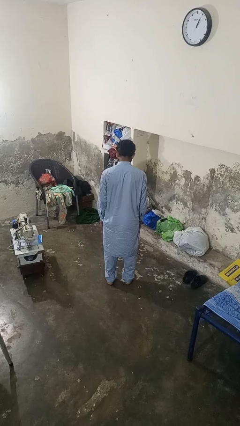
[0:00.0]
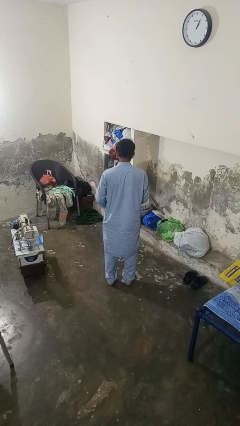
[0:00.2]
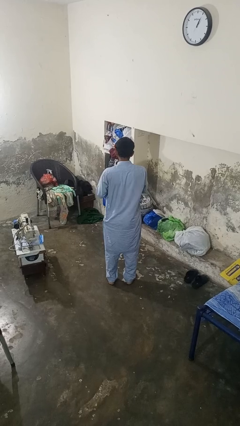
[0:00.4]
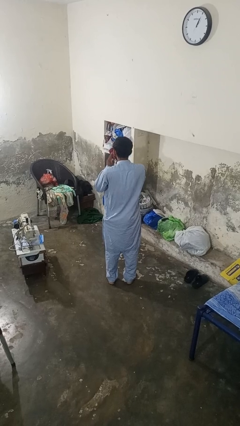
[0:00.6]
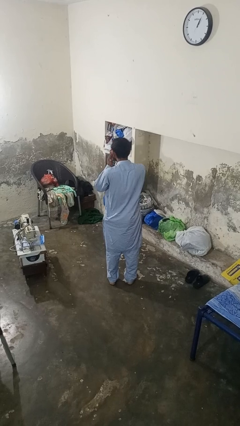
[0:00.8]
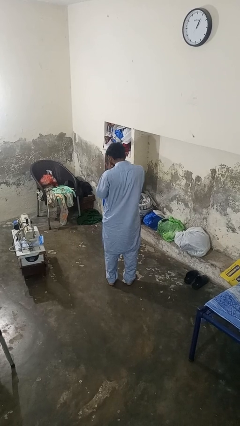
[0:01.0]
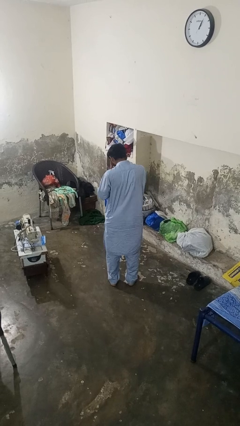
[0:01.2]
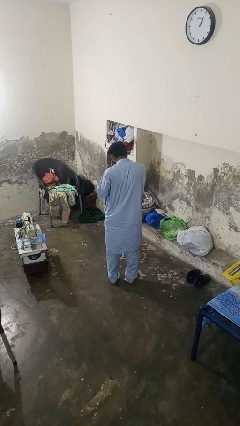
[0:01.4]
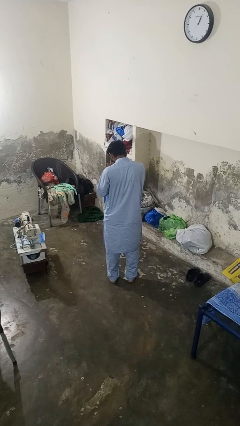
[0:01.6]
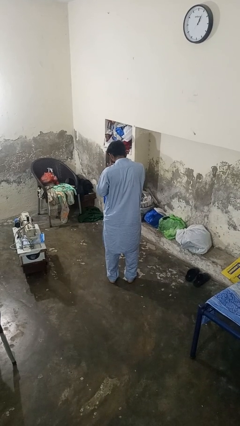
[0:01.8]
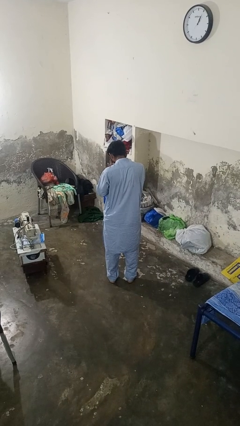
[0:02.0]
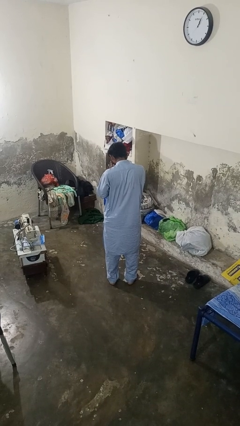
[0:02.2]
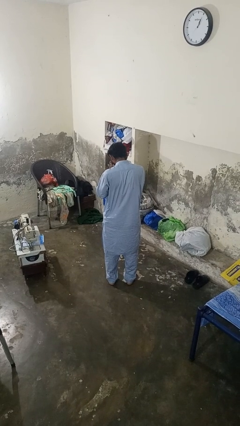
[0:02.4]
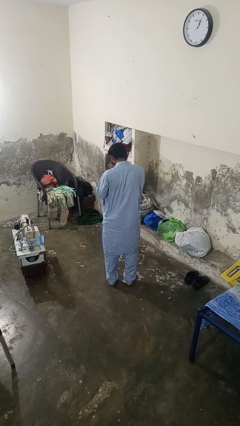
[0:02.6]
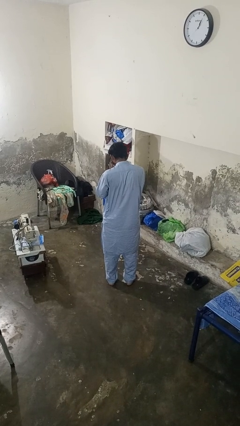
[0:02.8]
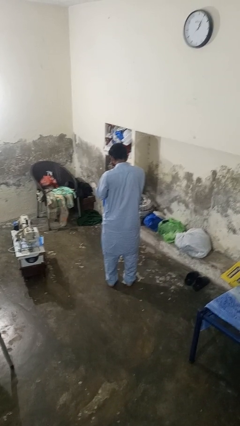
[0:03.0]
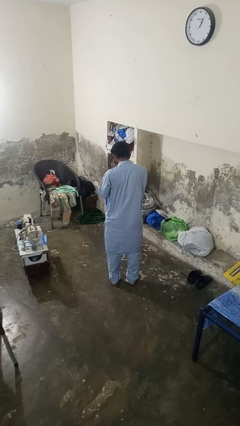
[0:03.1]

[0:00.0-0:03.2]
person sneezes into hand

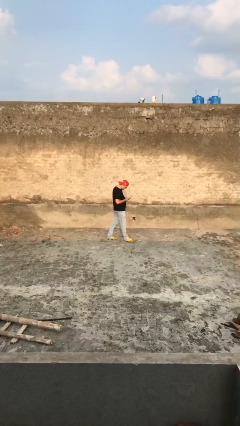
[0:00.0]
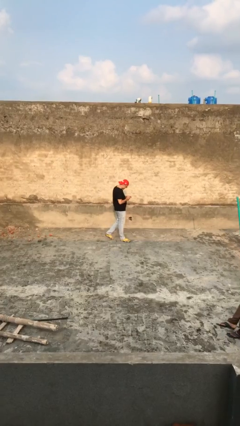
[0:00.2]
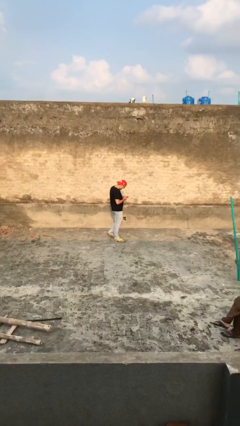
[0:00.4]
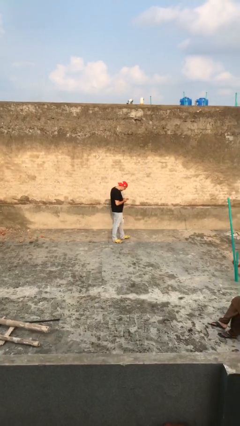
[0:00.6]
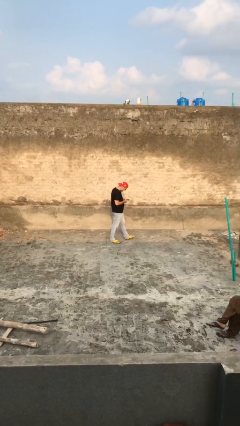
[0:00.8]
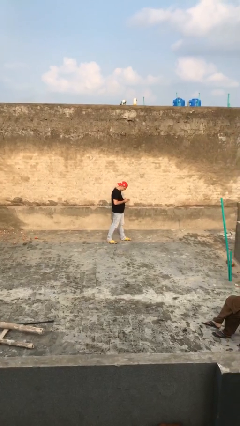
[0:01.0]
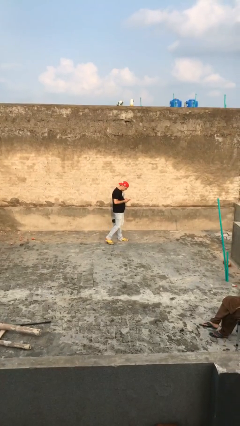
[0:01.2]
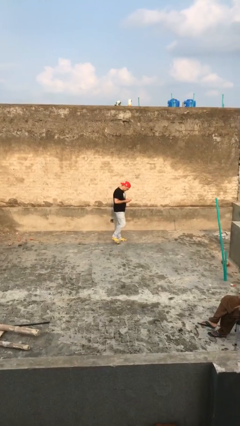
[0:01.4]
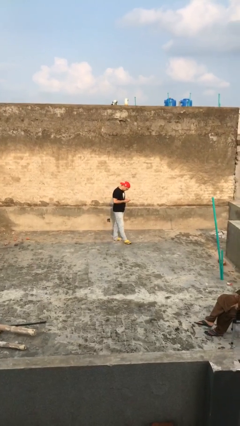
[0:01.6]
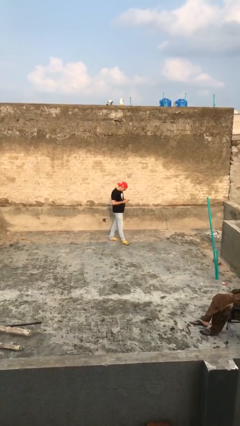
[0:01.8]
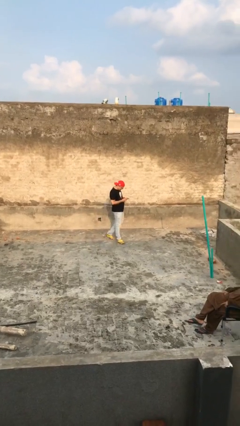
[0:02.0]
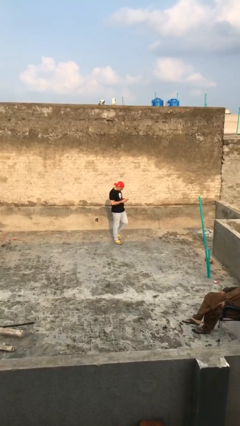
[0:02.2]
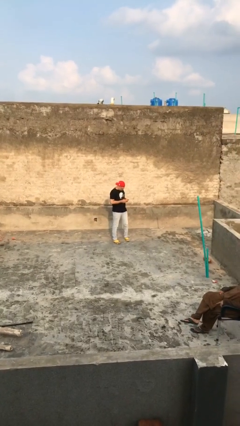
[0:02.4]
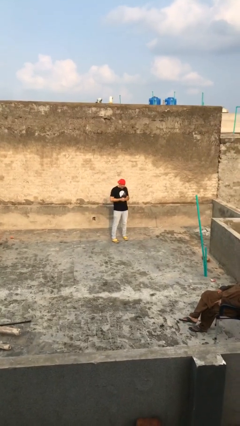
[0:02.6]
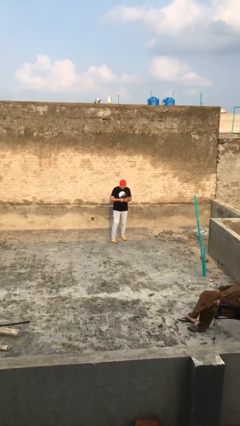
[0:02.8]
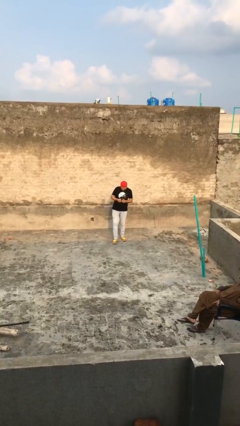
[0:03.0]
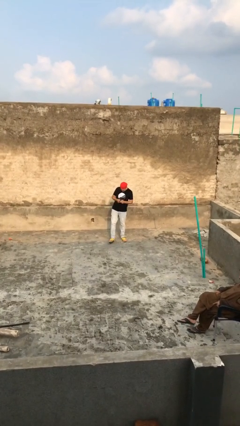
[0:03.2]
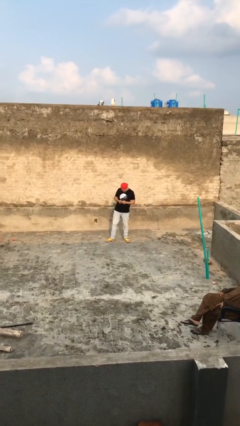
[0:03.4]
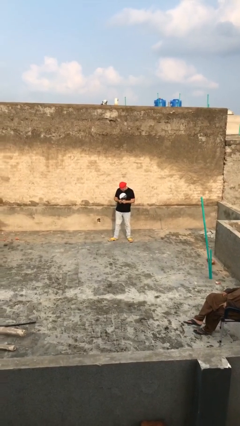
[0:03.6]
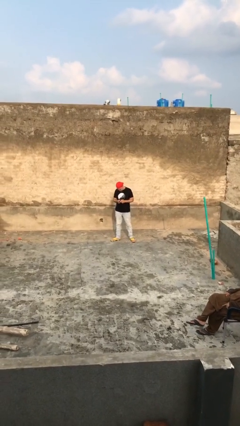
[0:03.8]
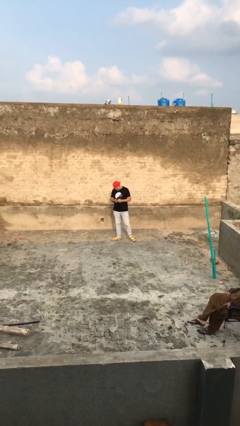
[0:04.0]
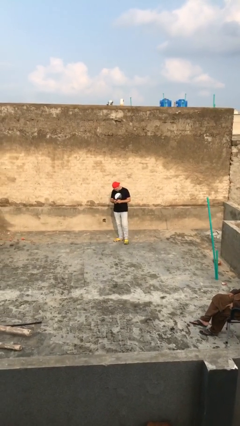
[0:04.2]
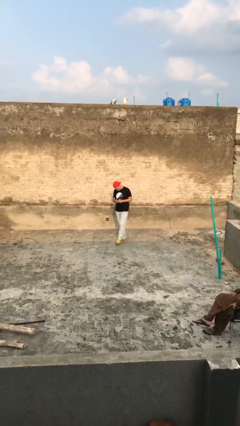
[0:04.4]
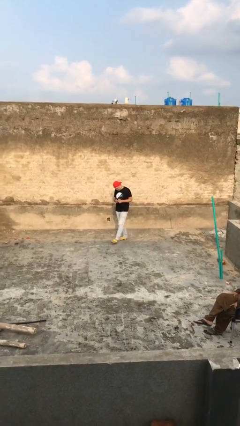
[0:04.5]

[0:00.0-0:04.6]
person texts on phone

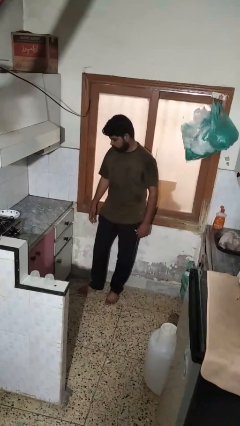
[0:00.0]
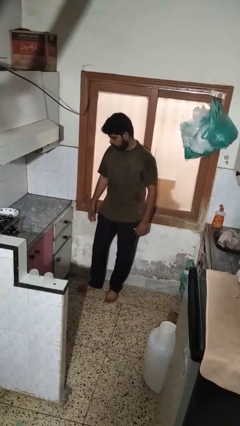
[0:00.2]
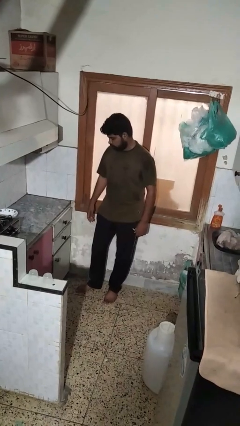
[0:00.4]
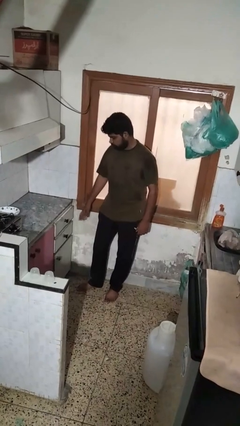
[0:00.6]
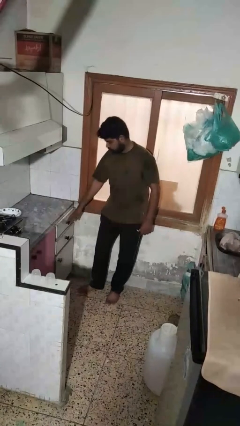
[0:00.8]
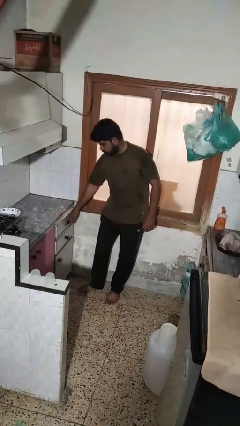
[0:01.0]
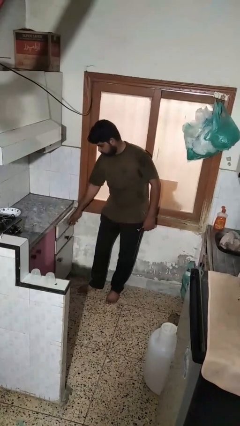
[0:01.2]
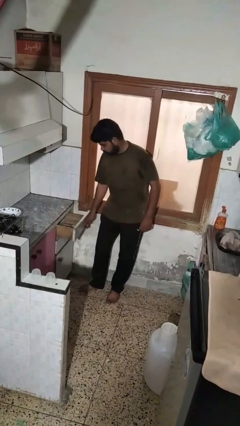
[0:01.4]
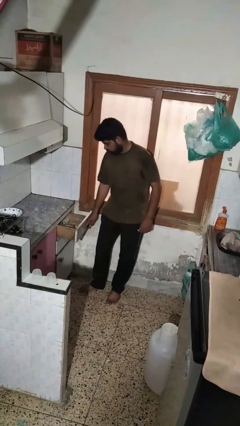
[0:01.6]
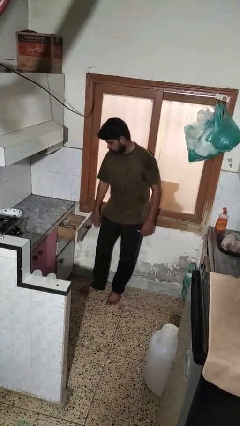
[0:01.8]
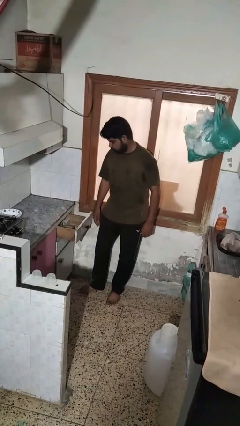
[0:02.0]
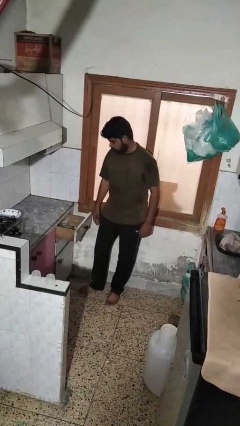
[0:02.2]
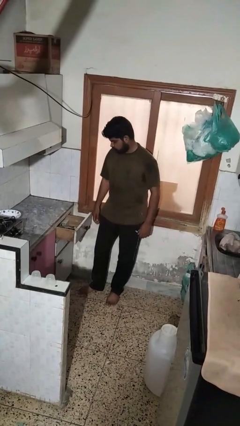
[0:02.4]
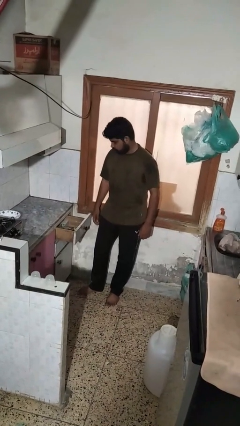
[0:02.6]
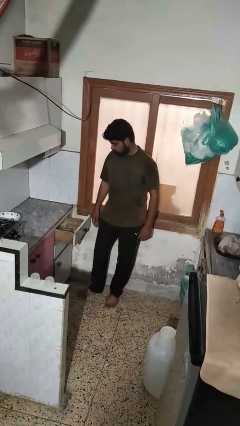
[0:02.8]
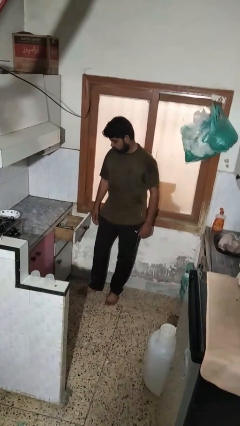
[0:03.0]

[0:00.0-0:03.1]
person opens kitchen drawer

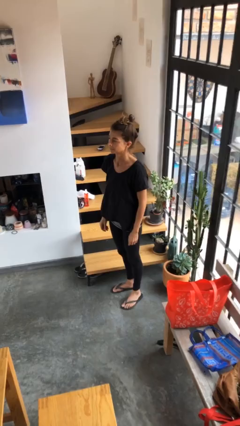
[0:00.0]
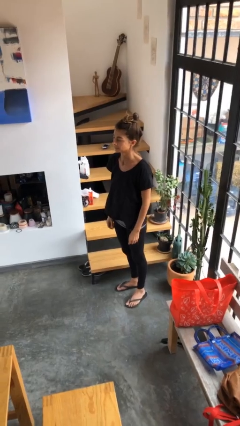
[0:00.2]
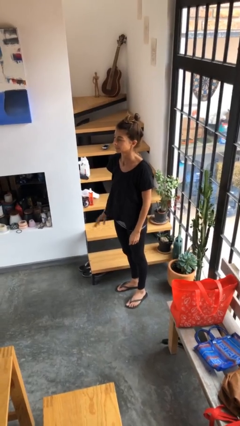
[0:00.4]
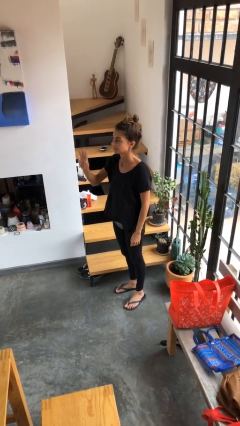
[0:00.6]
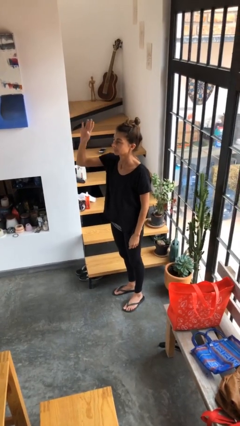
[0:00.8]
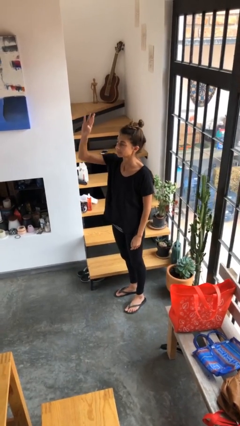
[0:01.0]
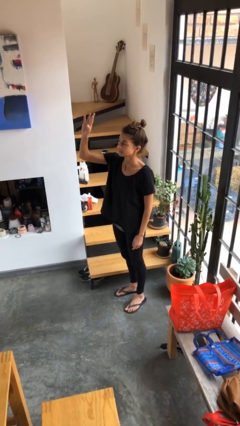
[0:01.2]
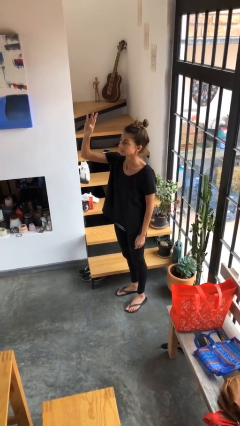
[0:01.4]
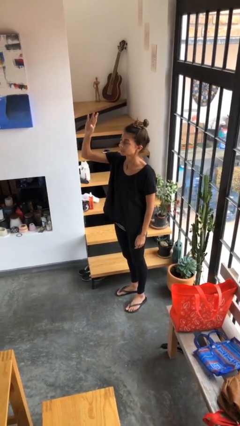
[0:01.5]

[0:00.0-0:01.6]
person gestures raise hand

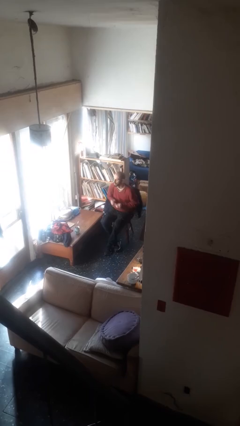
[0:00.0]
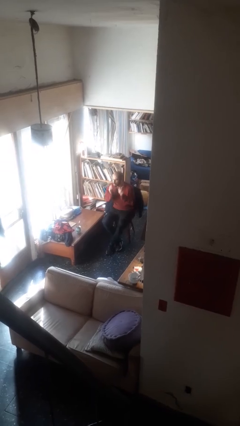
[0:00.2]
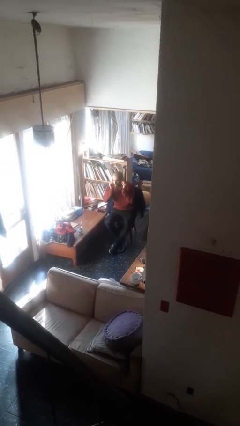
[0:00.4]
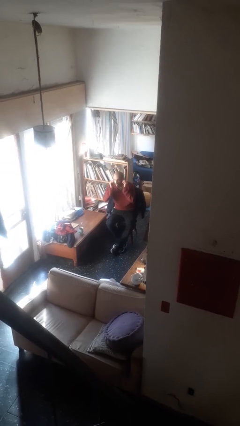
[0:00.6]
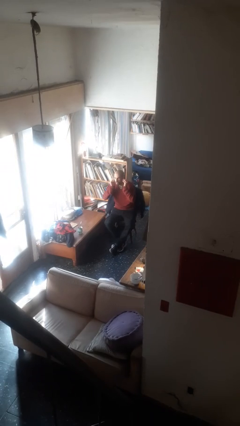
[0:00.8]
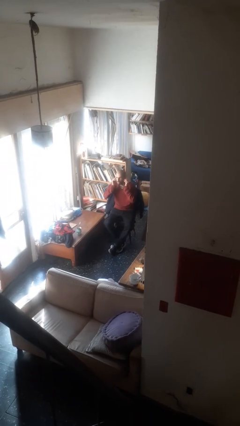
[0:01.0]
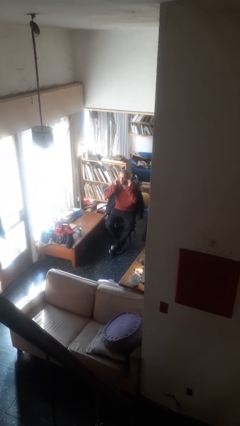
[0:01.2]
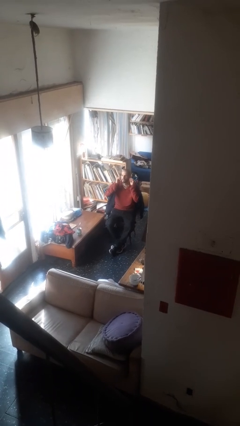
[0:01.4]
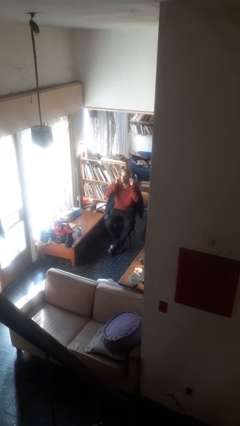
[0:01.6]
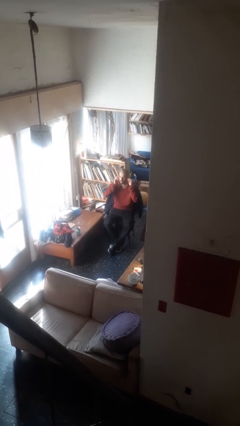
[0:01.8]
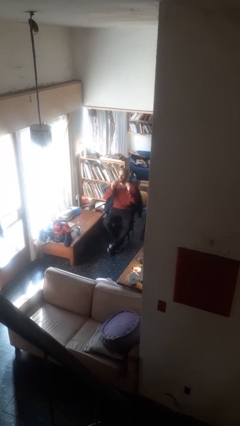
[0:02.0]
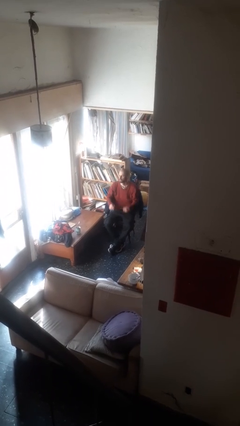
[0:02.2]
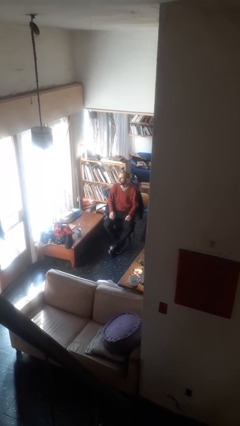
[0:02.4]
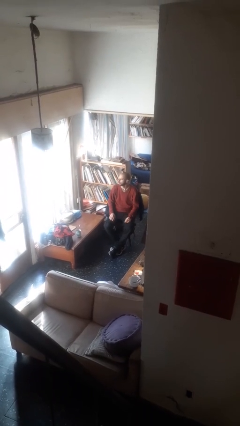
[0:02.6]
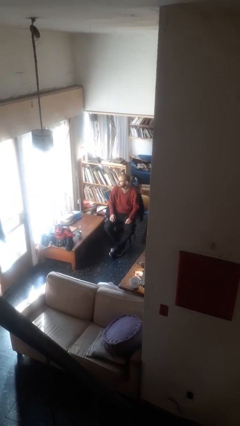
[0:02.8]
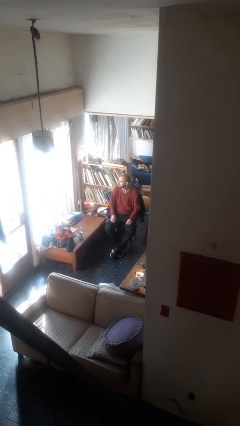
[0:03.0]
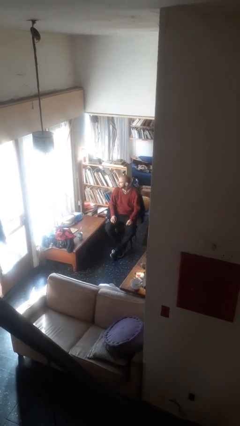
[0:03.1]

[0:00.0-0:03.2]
person puts on headphones

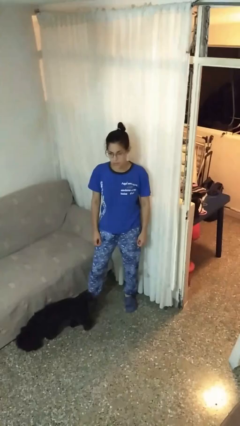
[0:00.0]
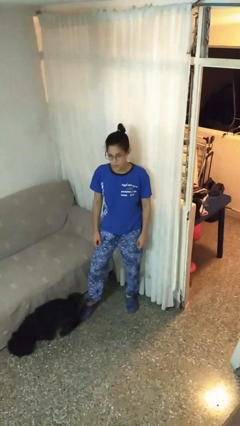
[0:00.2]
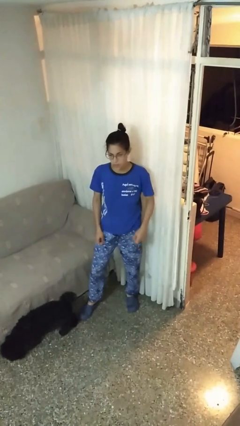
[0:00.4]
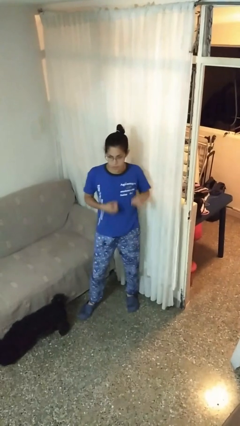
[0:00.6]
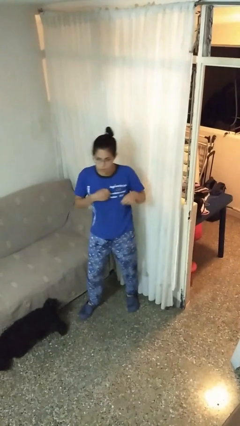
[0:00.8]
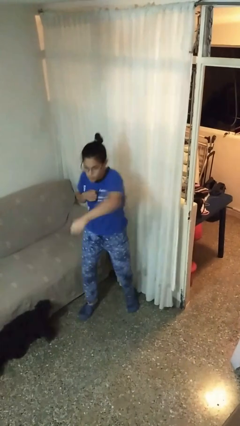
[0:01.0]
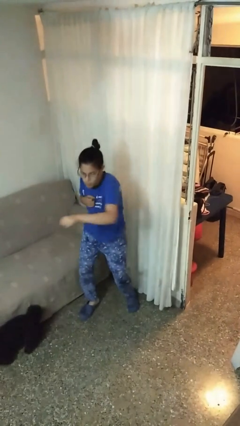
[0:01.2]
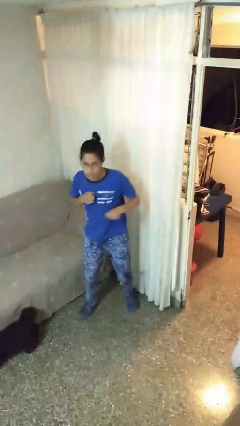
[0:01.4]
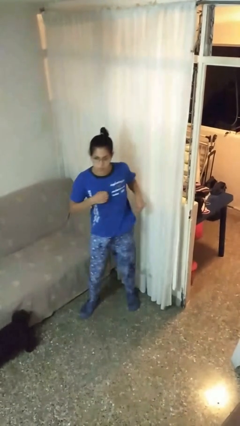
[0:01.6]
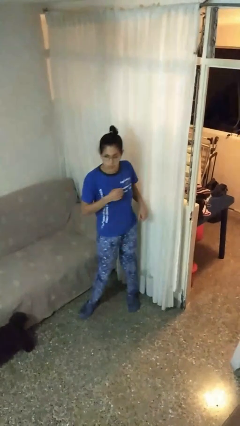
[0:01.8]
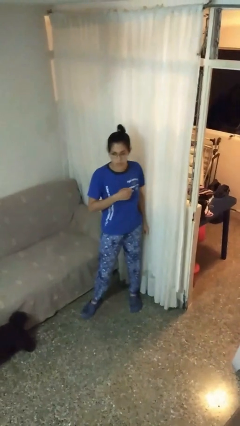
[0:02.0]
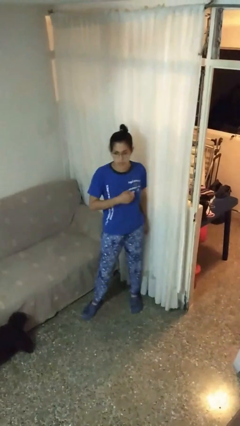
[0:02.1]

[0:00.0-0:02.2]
person punches
